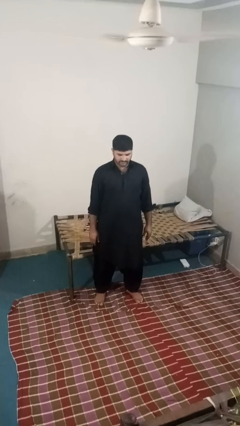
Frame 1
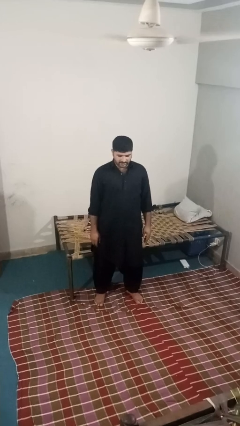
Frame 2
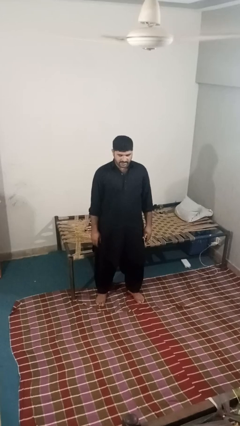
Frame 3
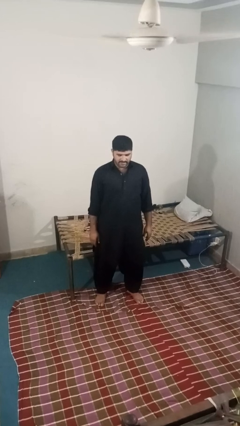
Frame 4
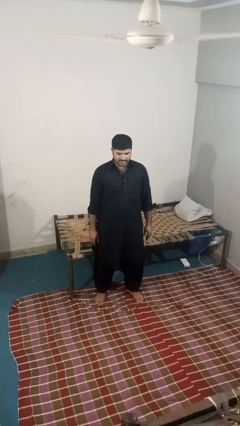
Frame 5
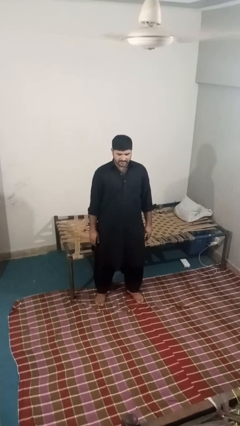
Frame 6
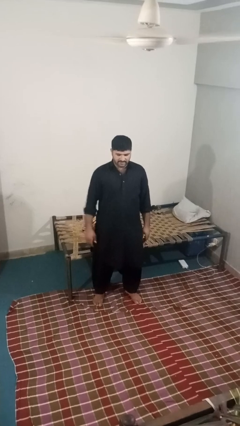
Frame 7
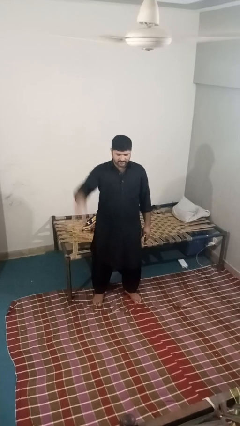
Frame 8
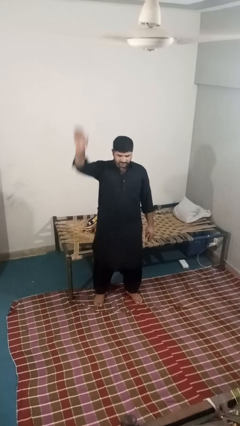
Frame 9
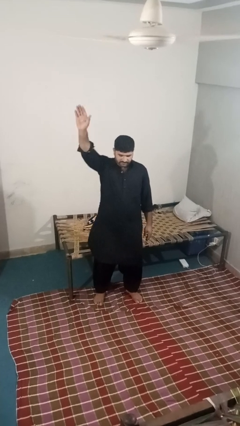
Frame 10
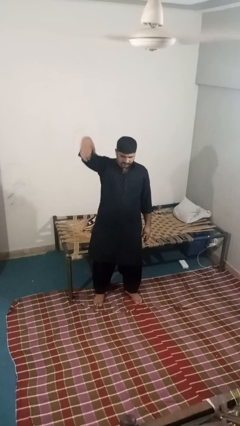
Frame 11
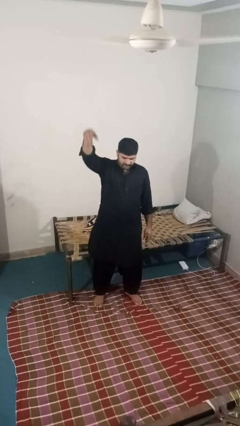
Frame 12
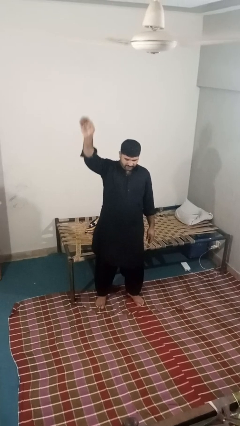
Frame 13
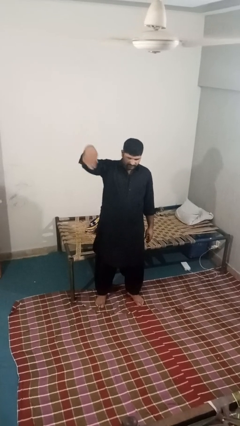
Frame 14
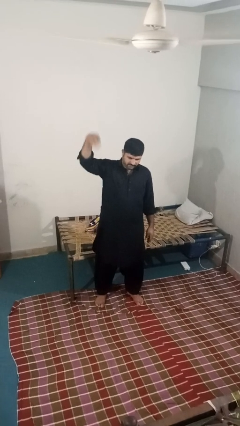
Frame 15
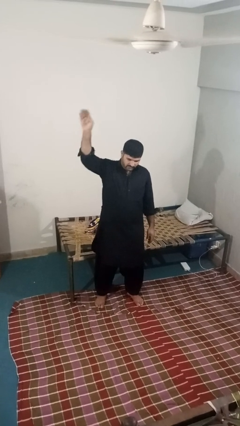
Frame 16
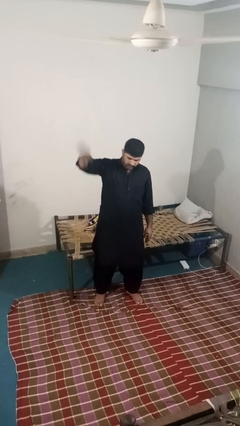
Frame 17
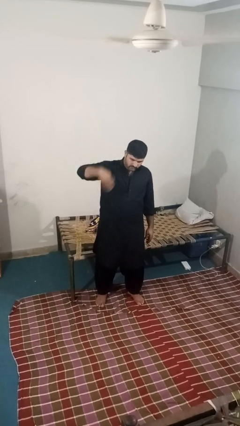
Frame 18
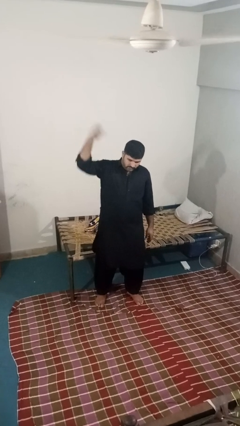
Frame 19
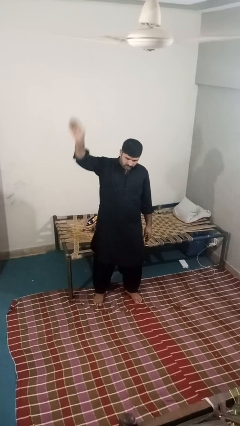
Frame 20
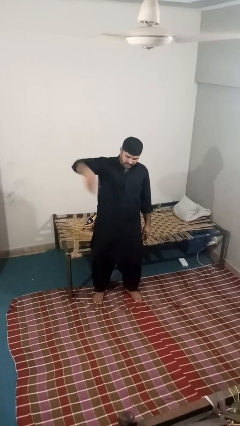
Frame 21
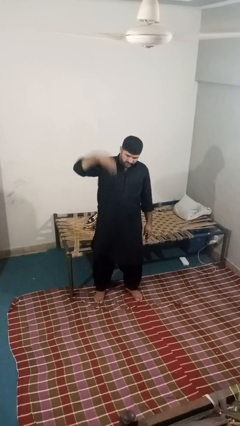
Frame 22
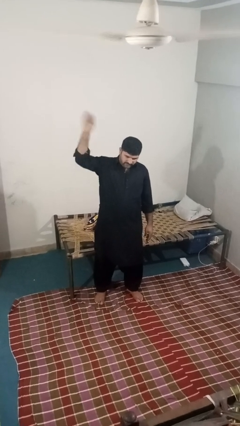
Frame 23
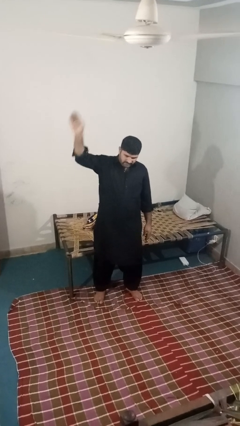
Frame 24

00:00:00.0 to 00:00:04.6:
person gestures come here

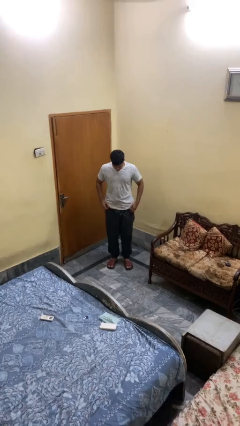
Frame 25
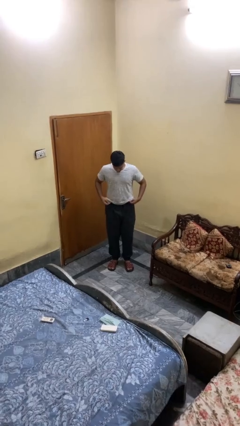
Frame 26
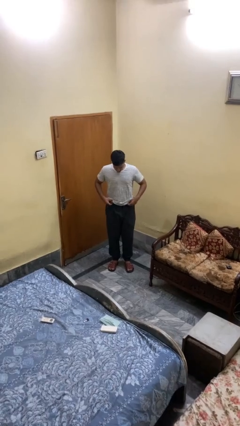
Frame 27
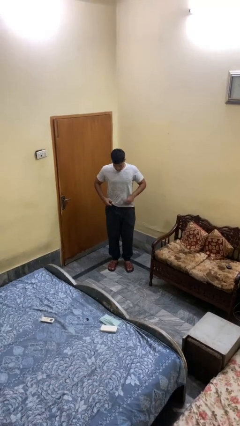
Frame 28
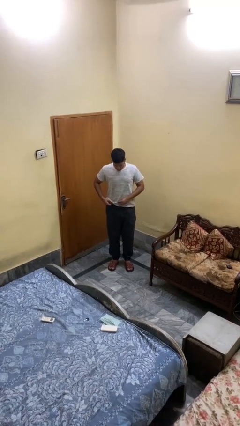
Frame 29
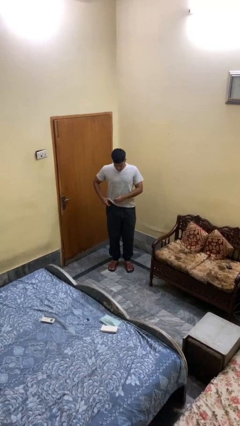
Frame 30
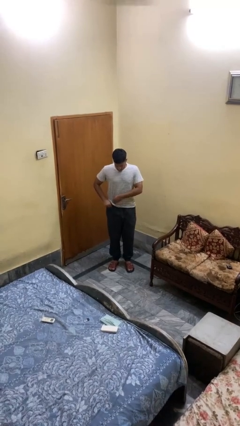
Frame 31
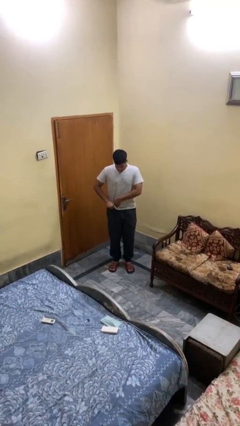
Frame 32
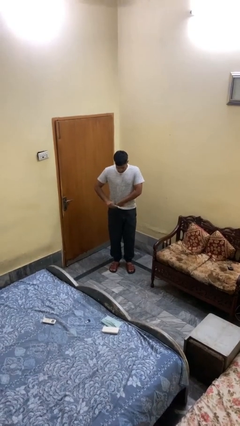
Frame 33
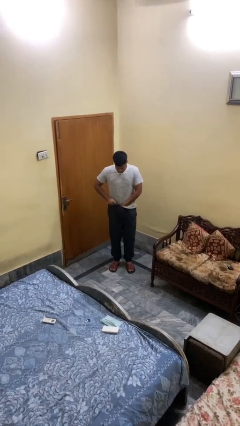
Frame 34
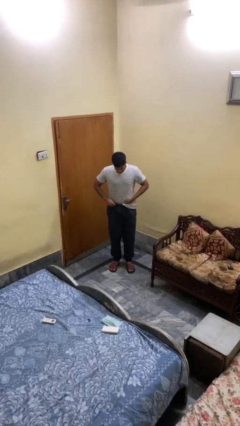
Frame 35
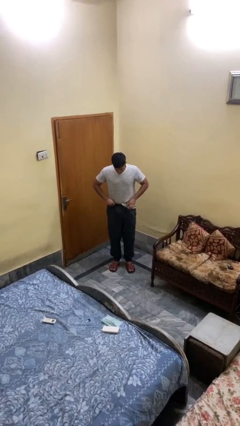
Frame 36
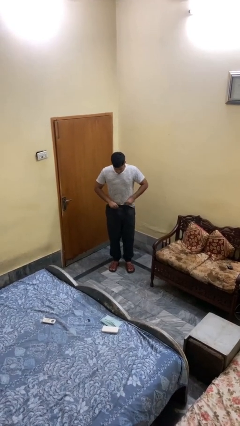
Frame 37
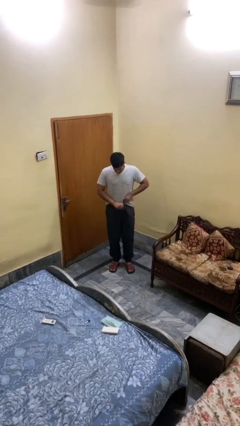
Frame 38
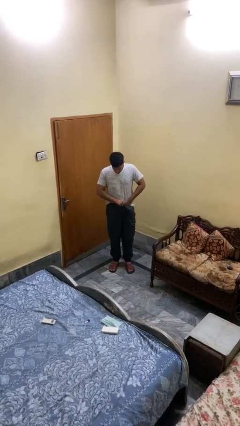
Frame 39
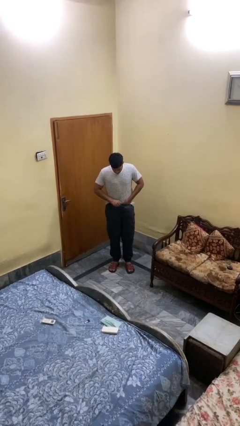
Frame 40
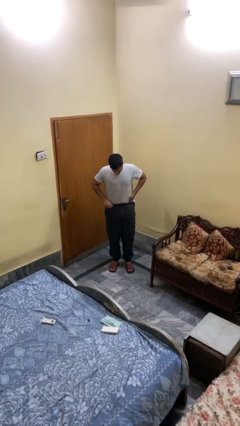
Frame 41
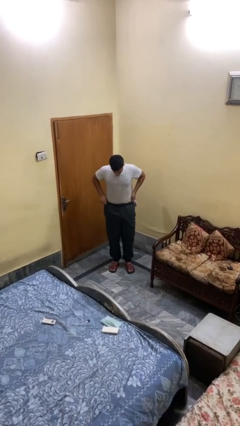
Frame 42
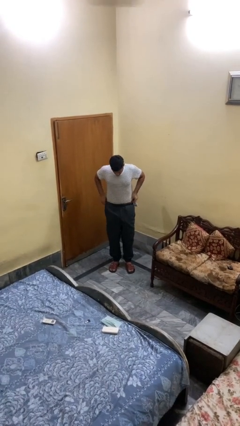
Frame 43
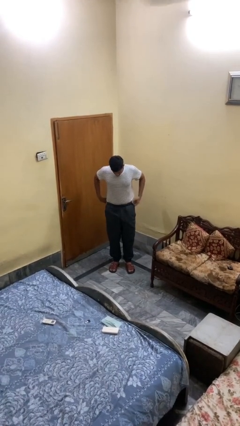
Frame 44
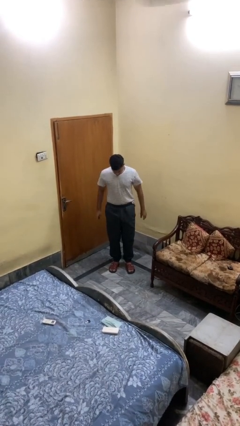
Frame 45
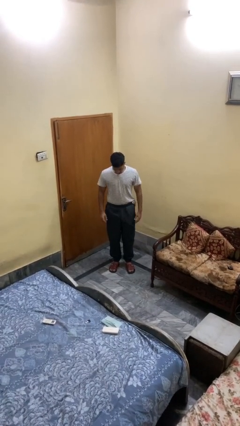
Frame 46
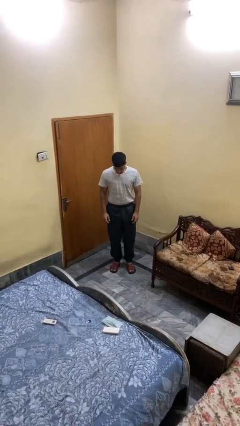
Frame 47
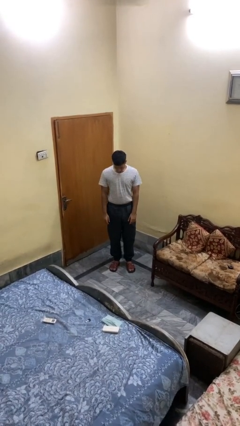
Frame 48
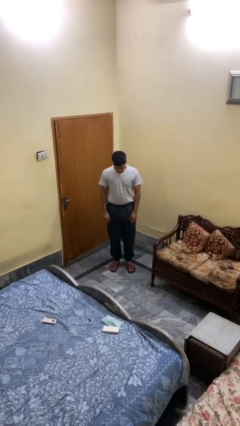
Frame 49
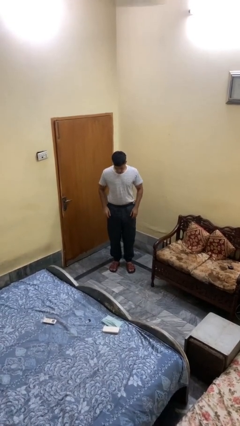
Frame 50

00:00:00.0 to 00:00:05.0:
person tucks in shirt

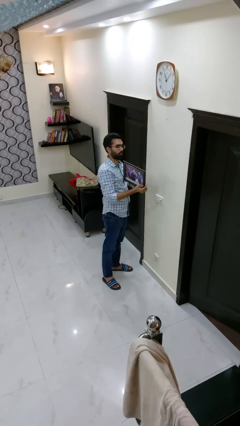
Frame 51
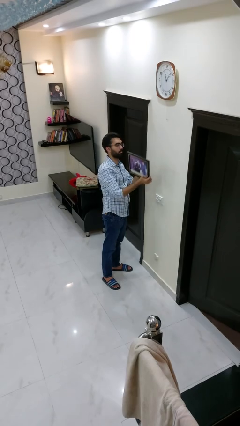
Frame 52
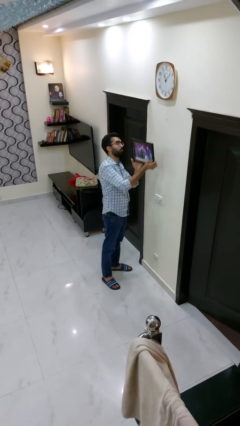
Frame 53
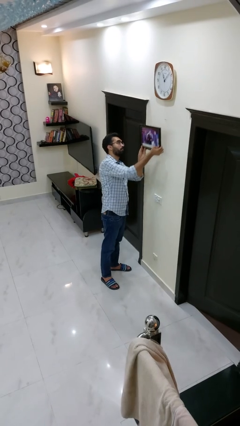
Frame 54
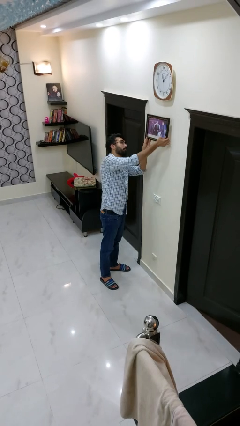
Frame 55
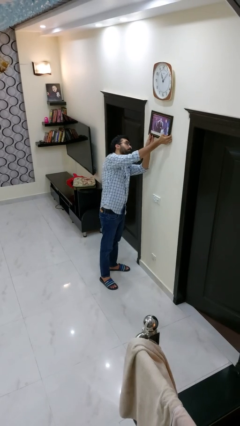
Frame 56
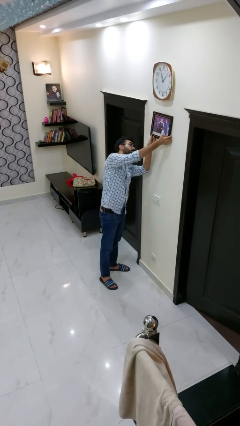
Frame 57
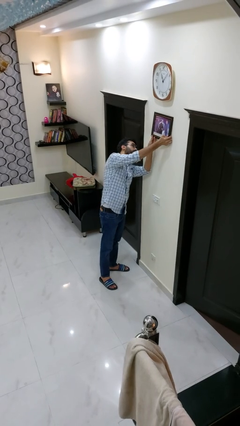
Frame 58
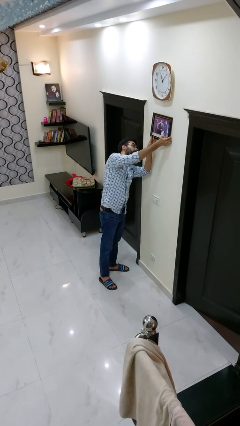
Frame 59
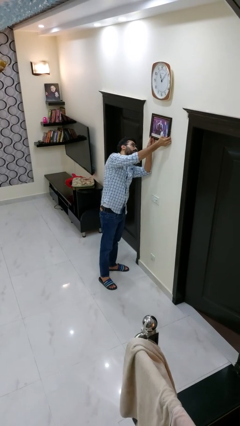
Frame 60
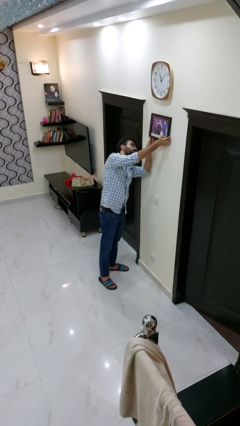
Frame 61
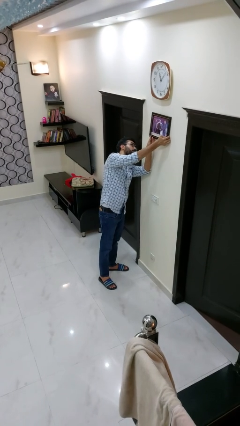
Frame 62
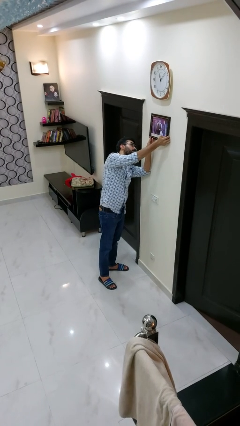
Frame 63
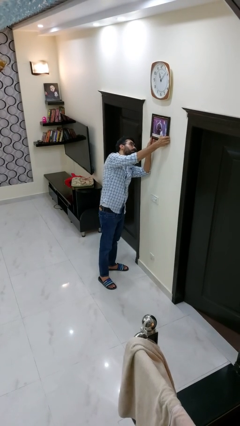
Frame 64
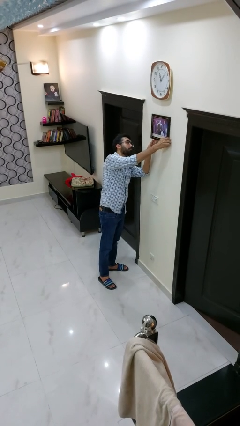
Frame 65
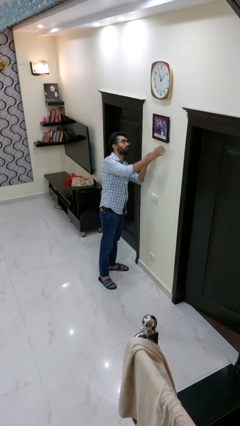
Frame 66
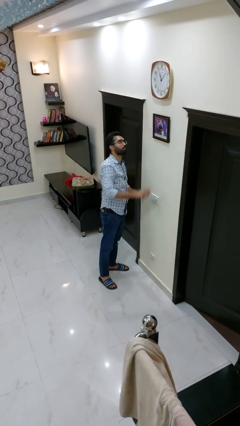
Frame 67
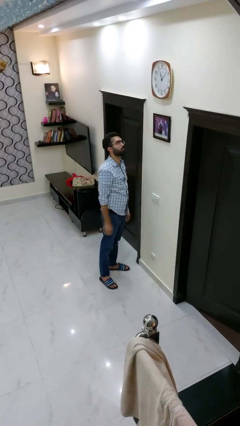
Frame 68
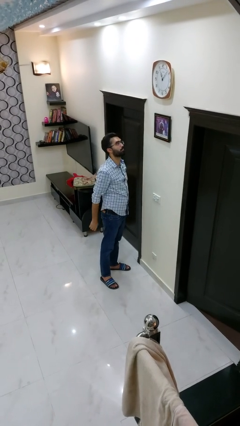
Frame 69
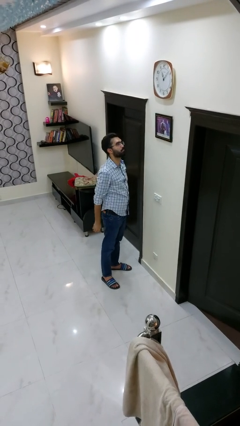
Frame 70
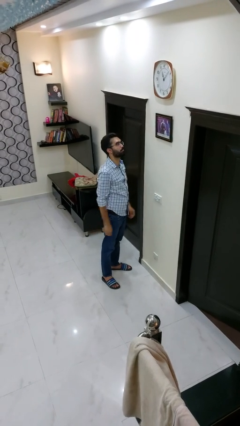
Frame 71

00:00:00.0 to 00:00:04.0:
person puts up picture frame

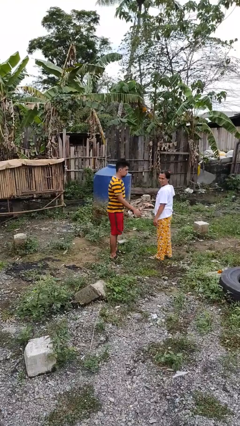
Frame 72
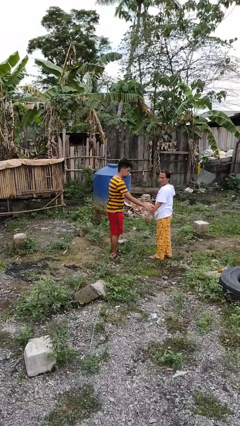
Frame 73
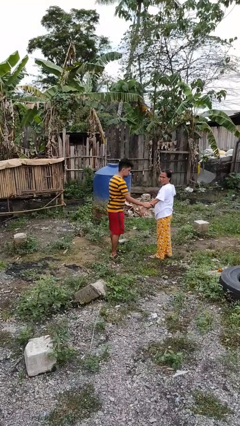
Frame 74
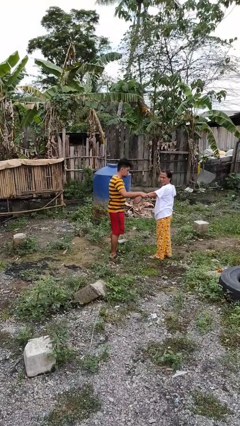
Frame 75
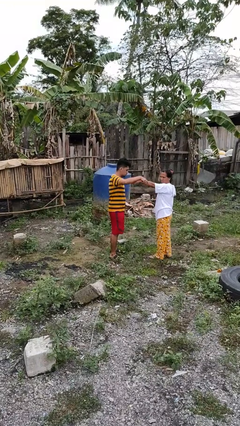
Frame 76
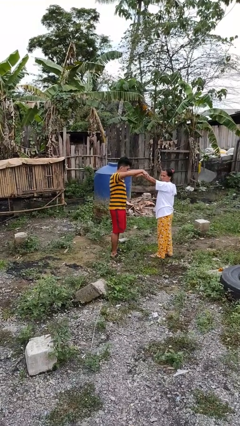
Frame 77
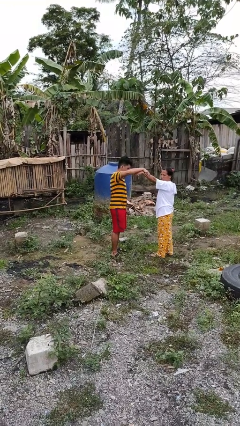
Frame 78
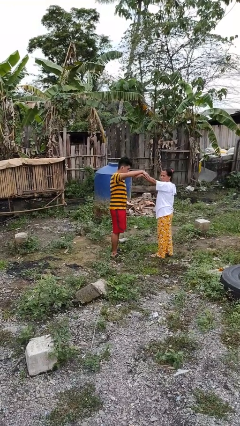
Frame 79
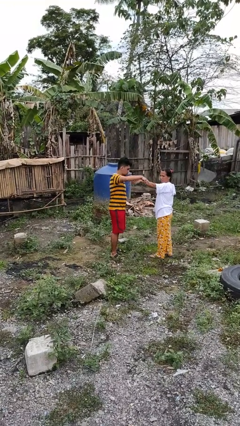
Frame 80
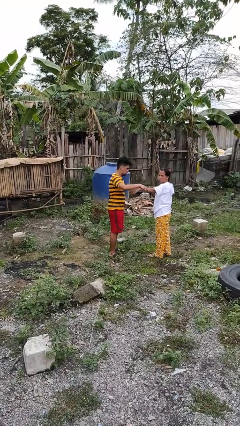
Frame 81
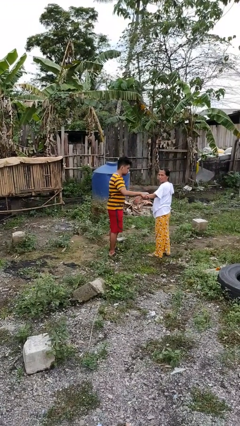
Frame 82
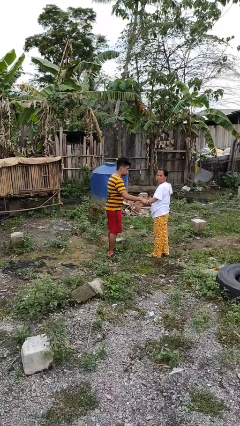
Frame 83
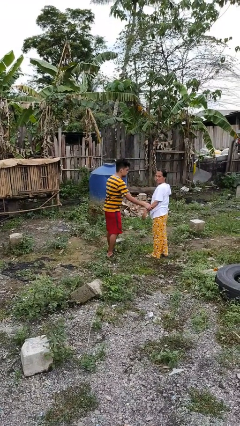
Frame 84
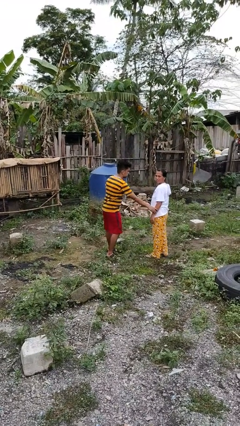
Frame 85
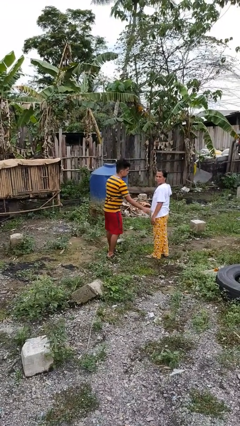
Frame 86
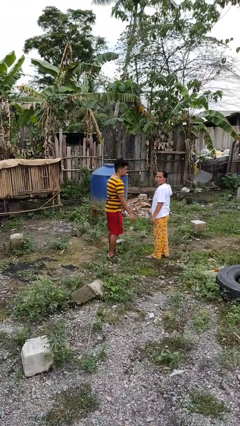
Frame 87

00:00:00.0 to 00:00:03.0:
person grabs person by forearm

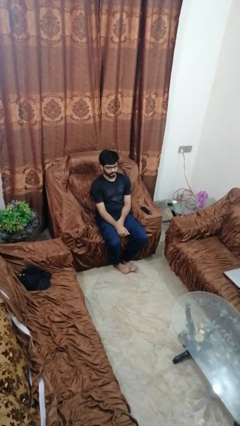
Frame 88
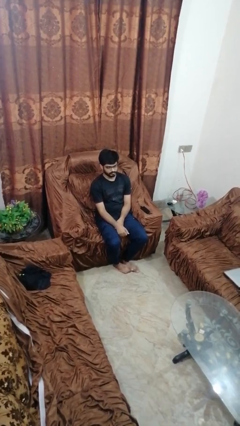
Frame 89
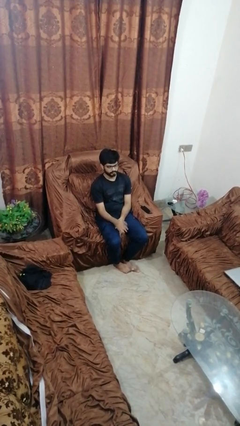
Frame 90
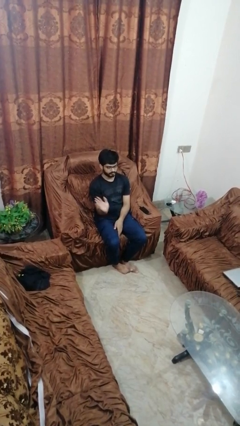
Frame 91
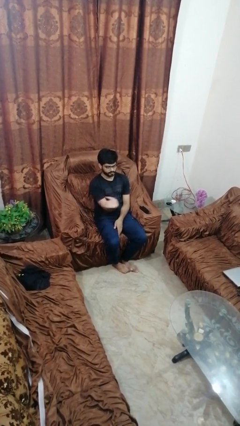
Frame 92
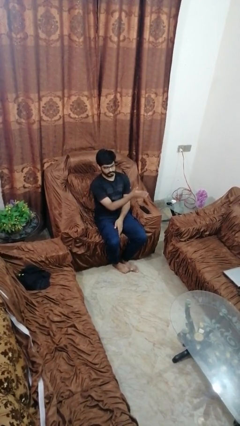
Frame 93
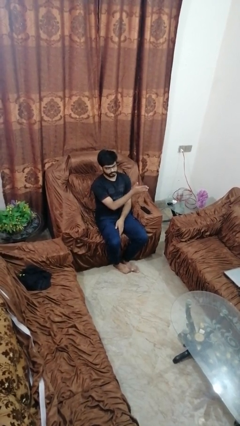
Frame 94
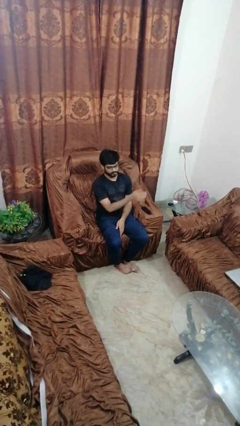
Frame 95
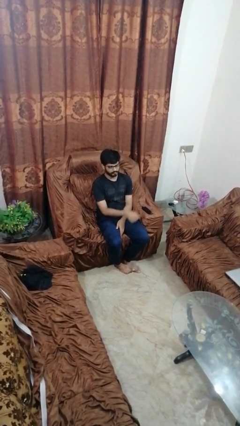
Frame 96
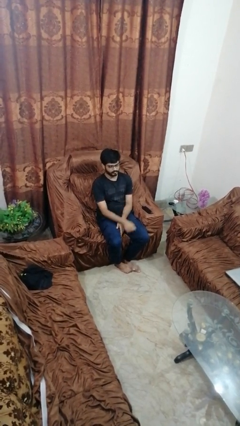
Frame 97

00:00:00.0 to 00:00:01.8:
person gestures swipe left
